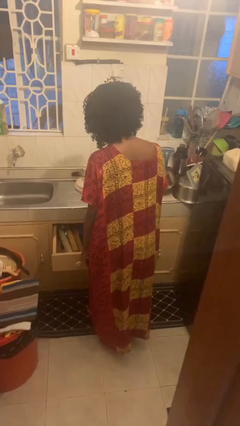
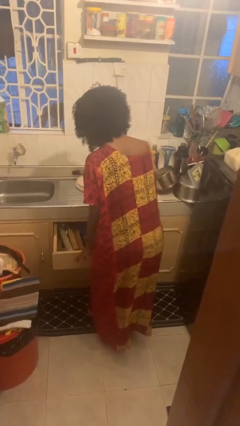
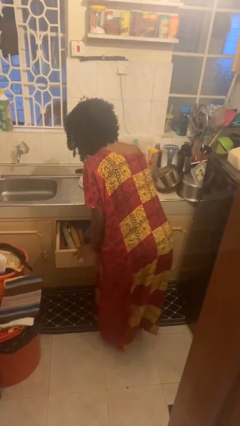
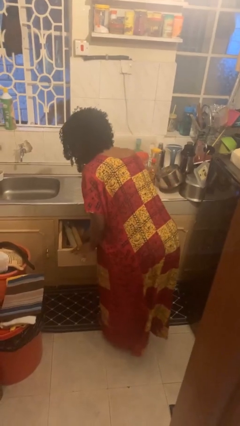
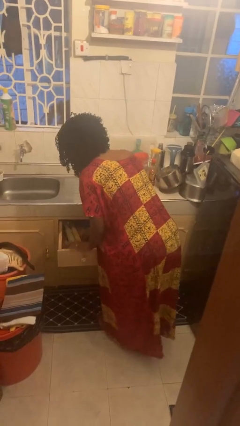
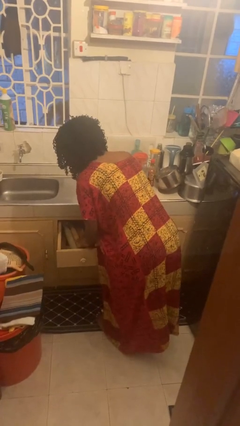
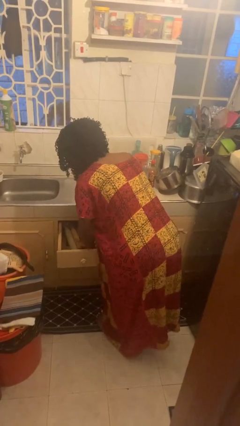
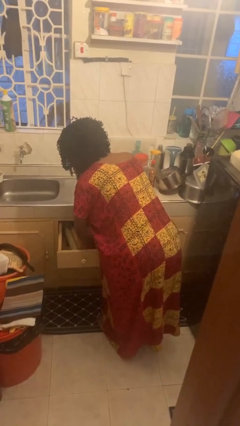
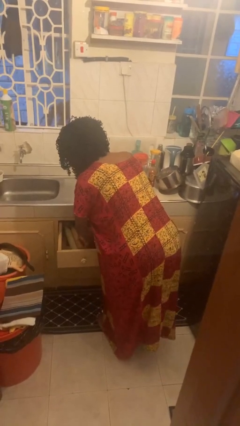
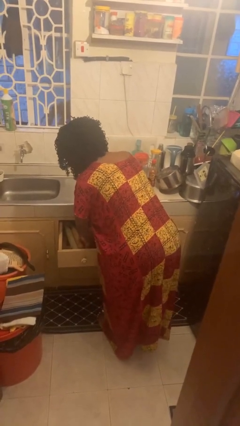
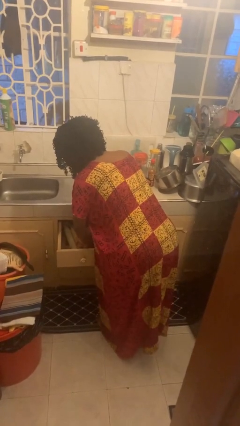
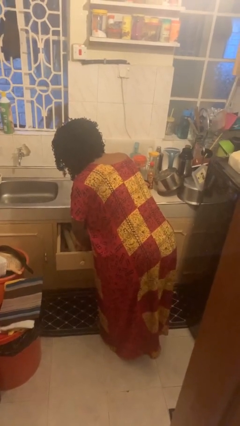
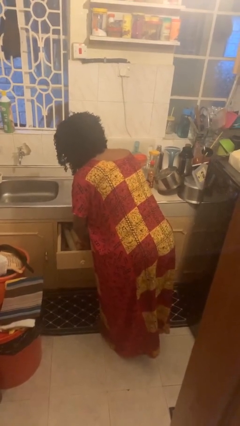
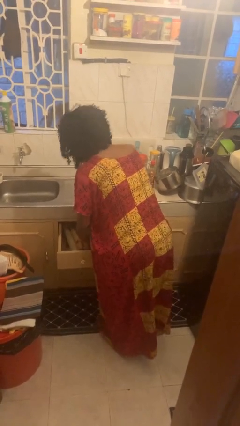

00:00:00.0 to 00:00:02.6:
person searches in kitchen drawer

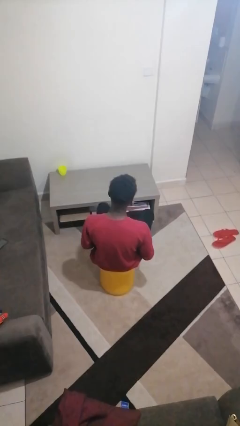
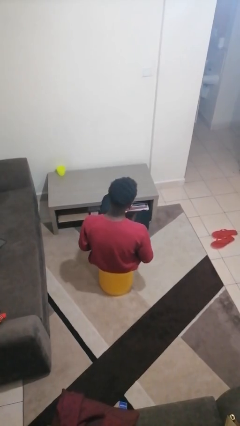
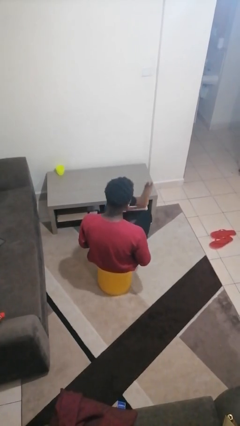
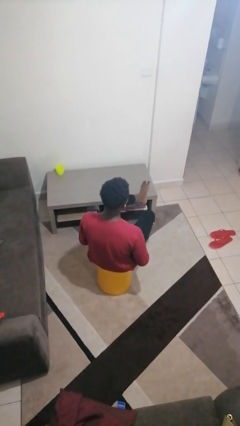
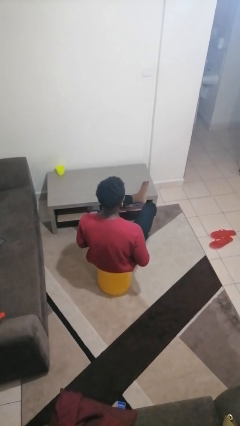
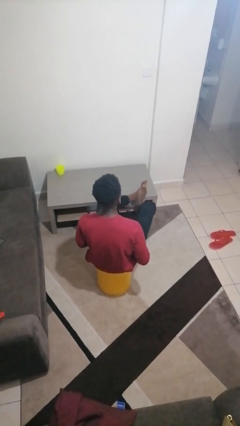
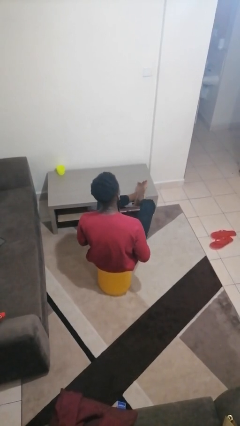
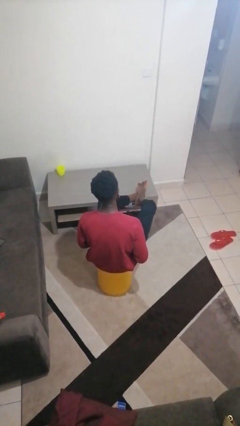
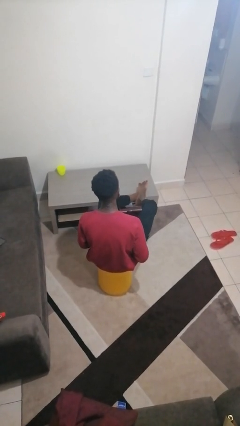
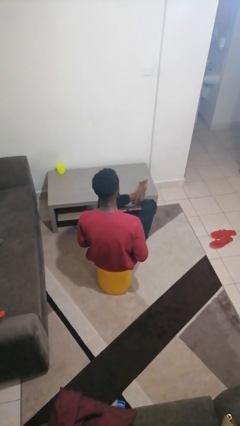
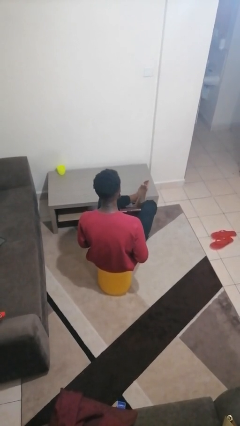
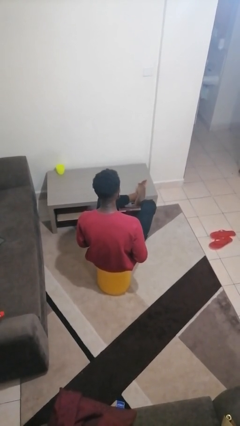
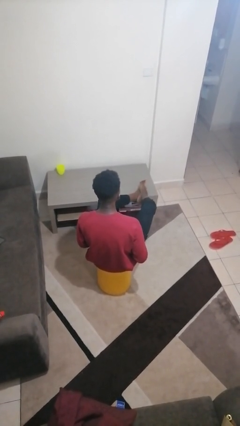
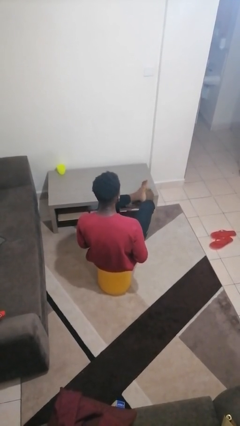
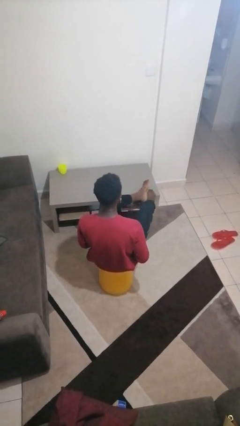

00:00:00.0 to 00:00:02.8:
person puts feet up

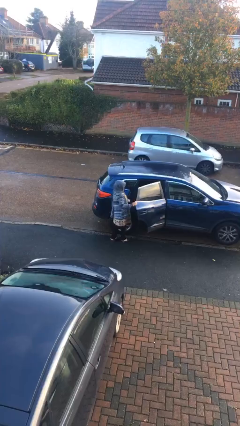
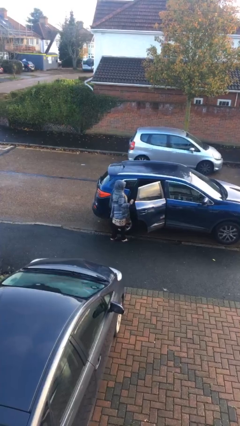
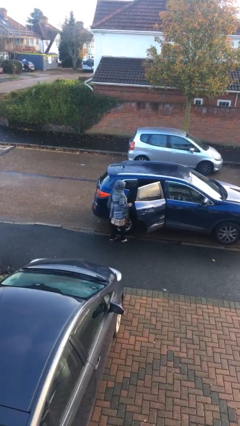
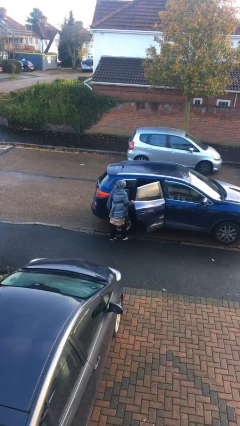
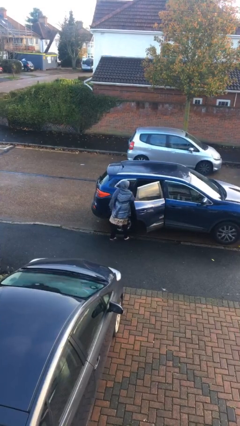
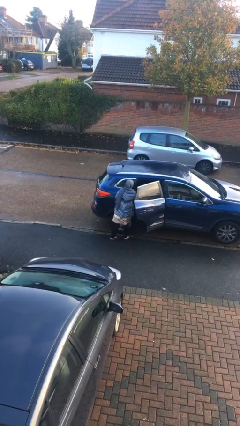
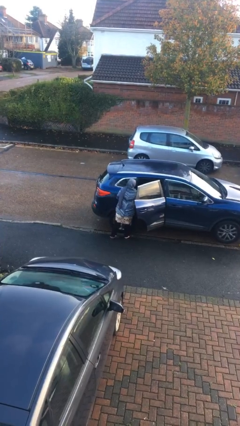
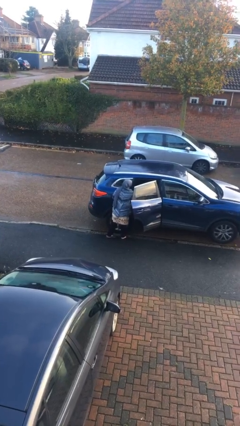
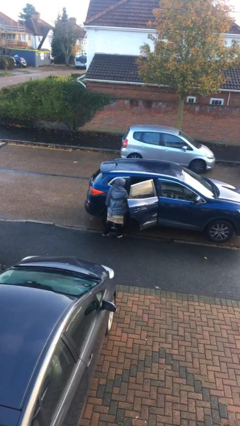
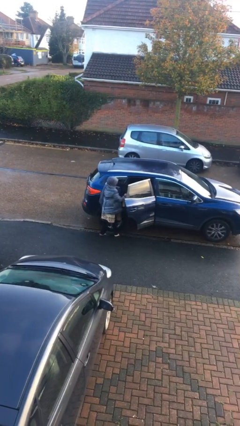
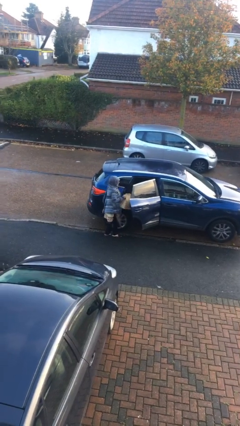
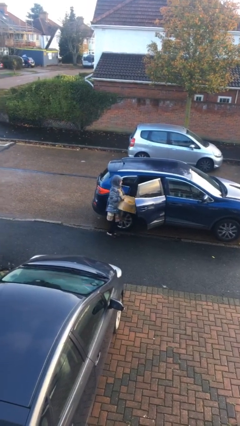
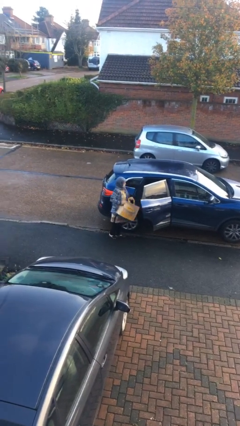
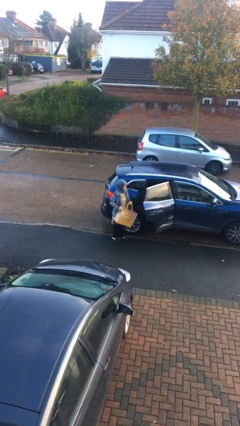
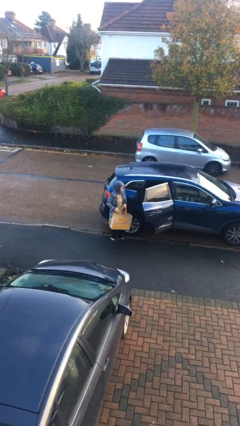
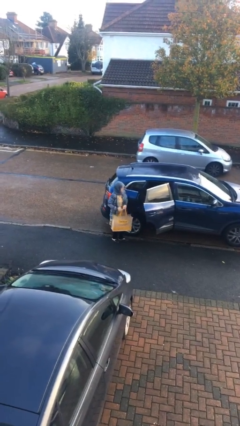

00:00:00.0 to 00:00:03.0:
person unloads car

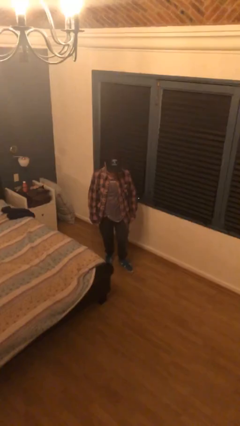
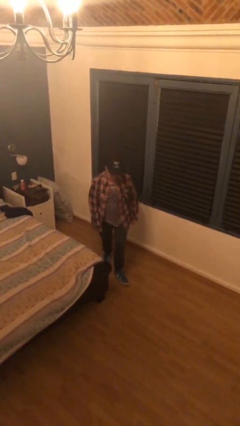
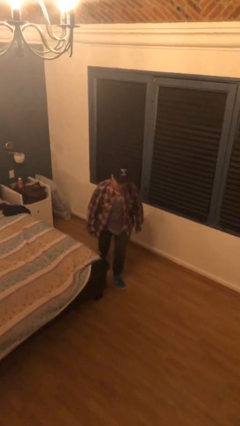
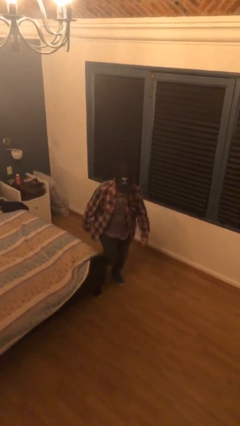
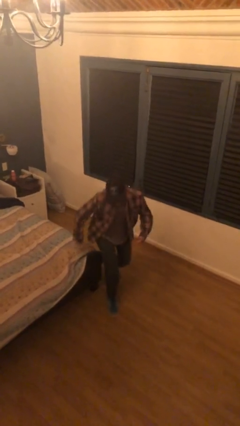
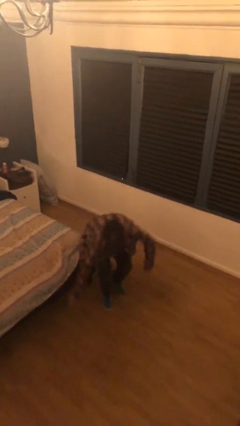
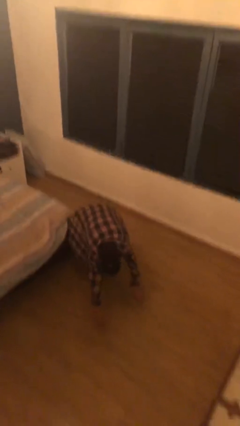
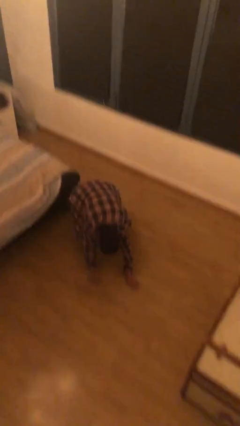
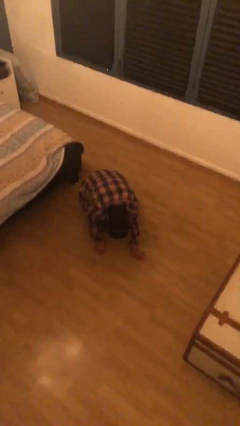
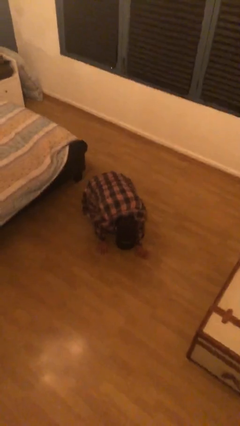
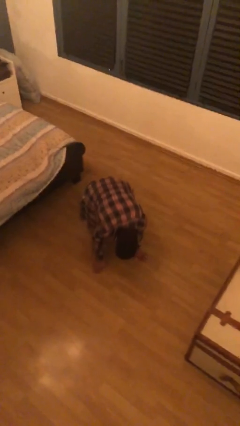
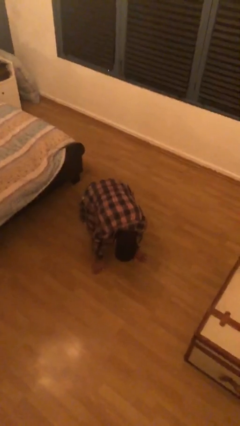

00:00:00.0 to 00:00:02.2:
person trips on object on floor

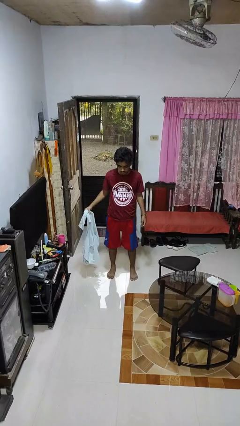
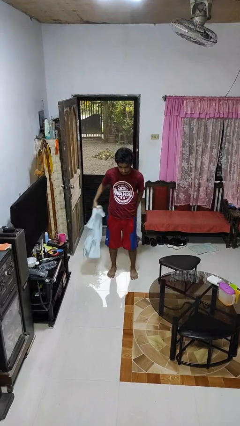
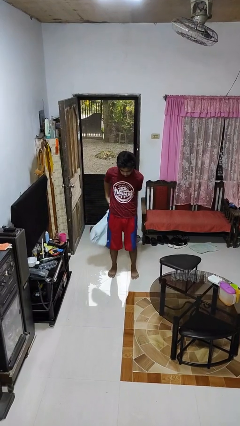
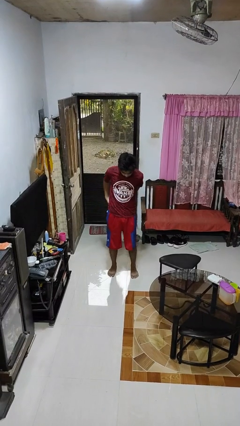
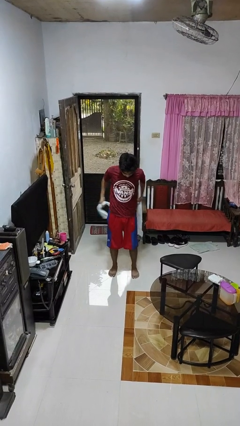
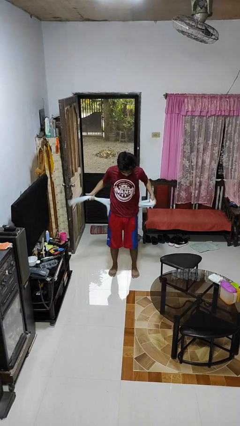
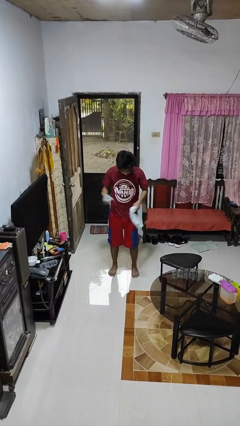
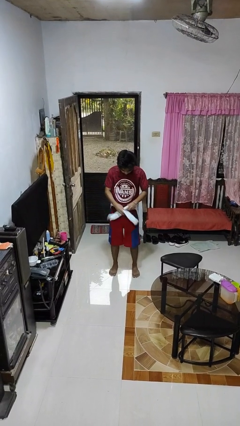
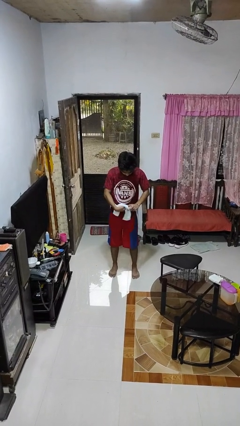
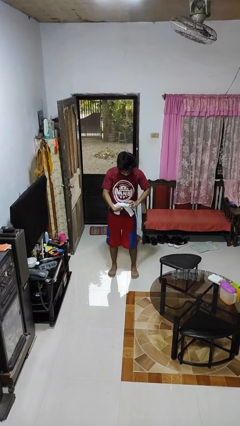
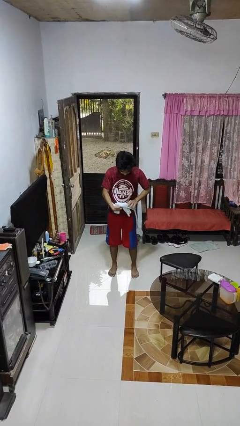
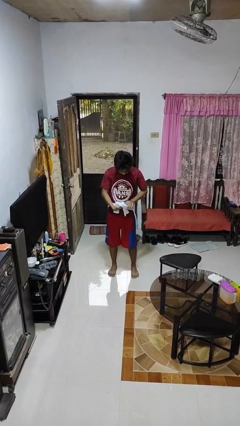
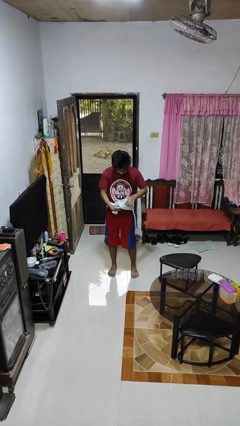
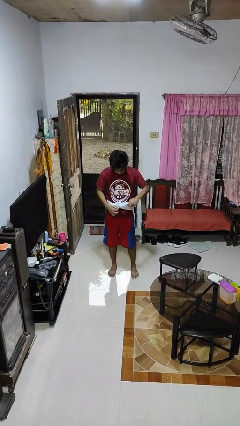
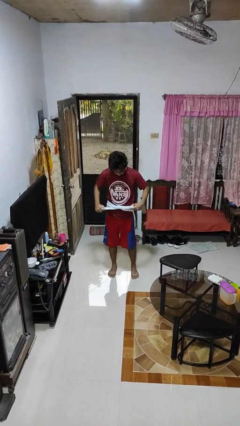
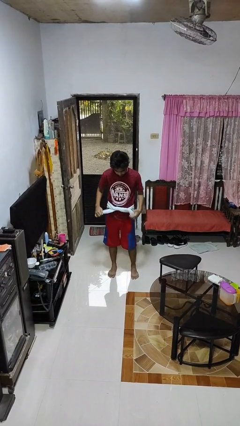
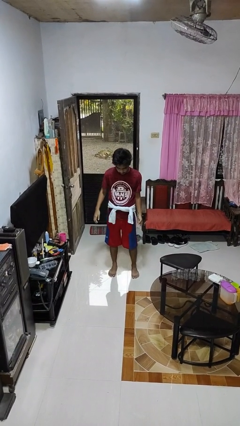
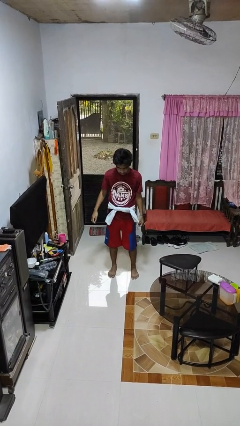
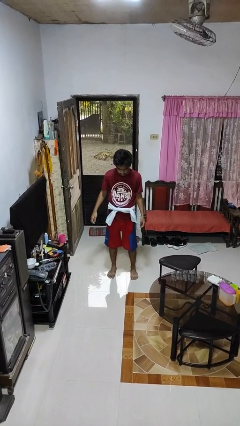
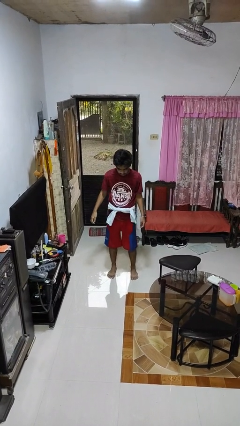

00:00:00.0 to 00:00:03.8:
person ties jacket around waist

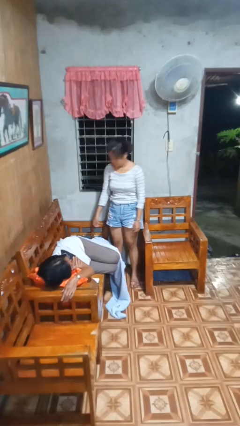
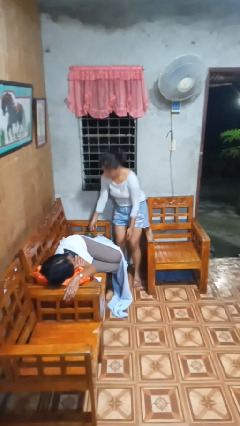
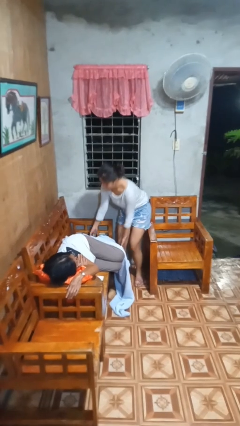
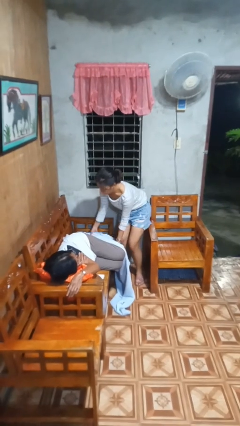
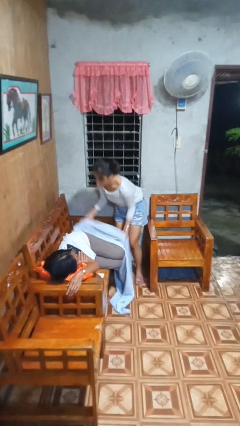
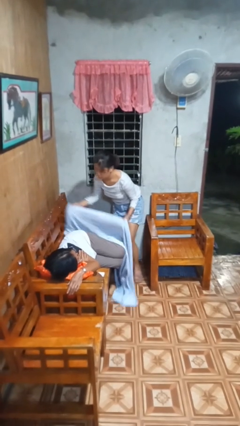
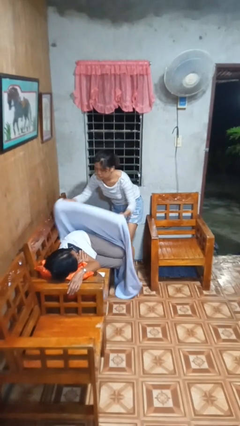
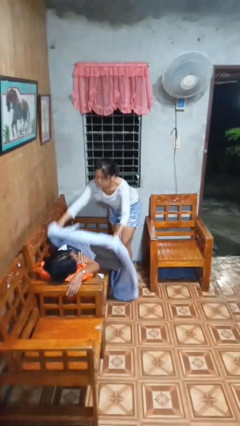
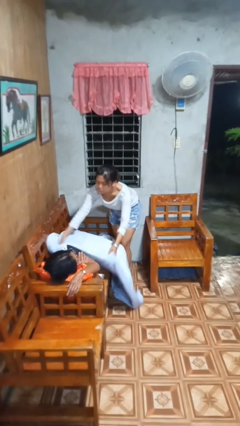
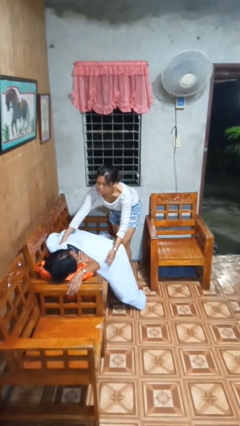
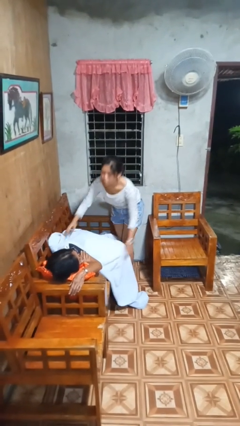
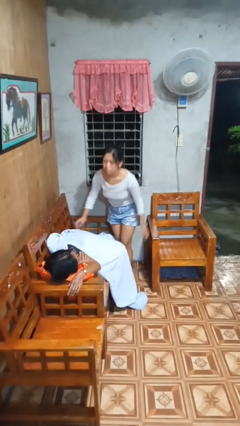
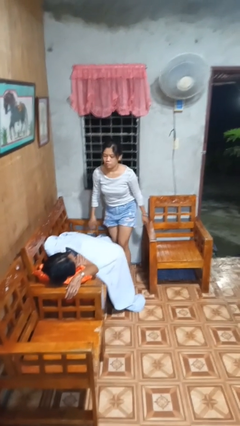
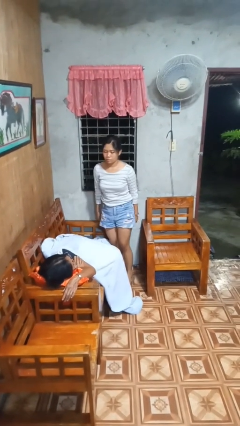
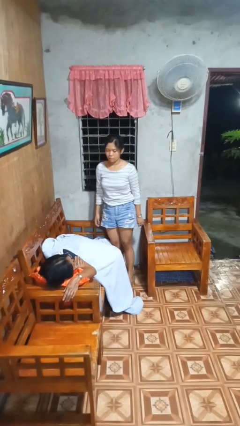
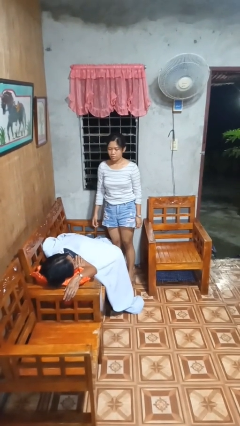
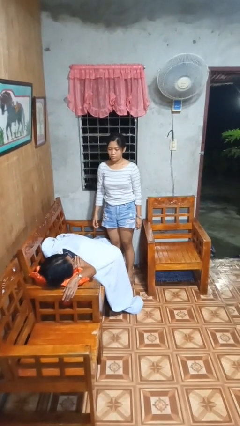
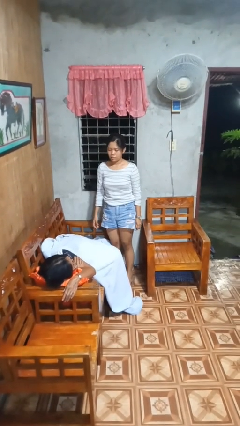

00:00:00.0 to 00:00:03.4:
person covers friend with blanket
